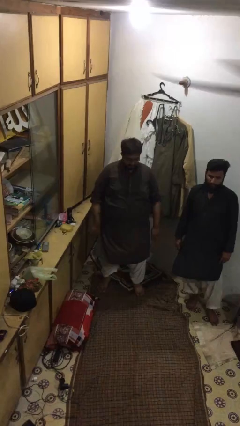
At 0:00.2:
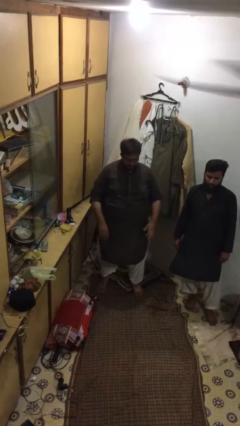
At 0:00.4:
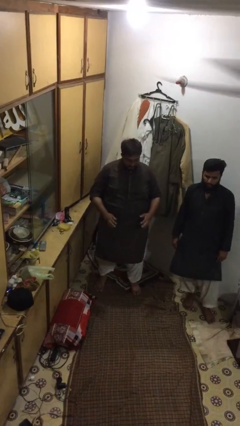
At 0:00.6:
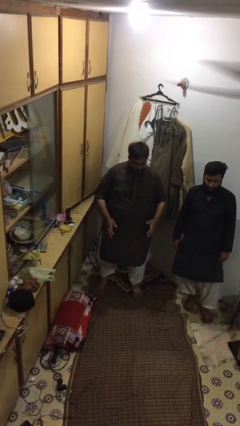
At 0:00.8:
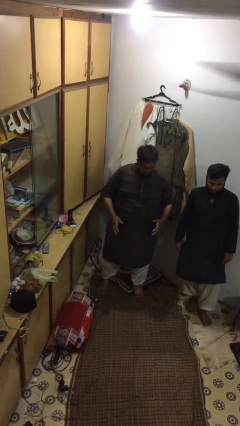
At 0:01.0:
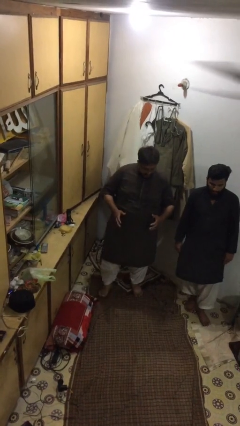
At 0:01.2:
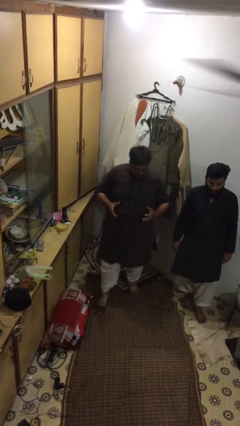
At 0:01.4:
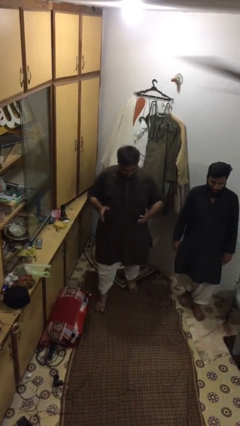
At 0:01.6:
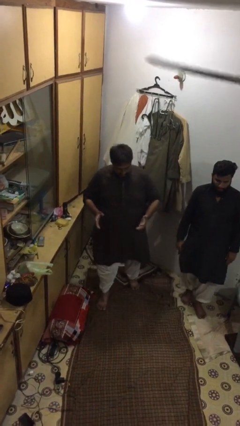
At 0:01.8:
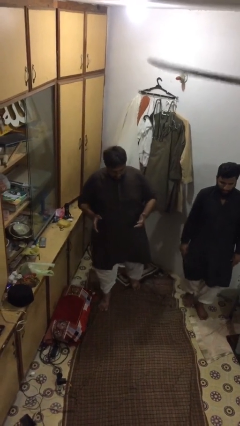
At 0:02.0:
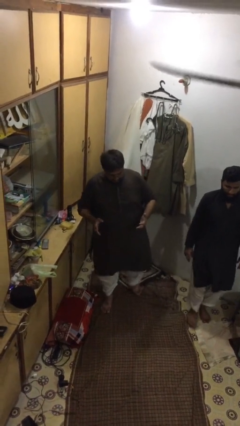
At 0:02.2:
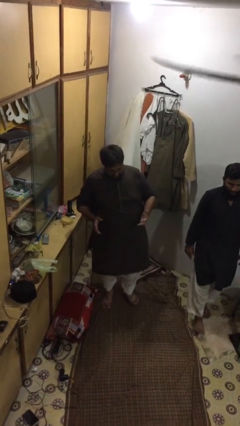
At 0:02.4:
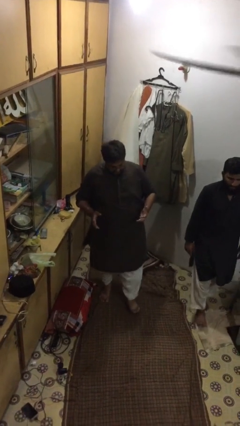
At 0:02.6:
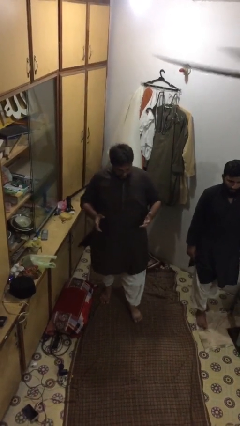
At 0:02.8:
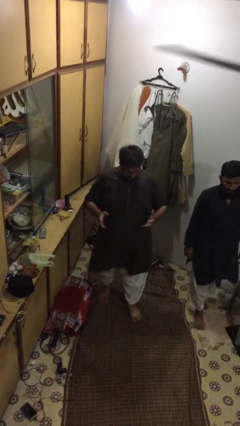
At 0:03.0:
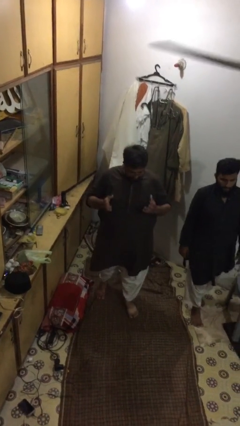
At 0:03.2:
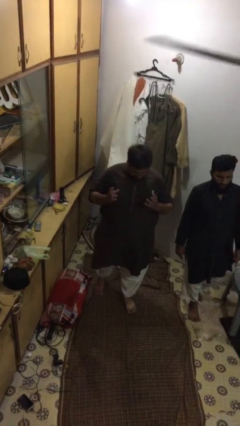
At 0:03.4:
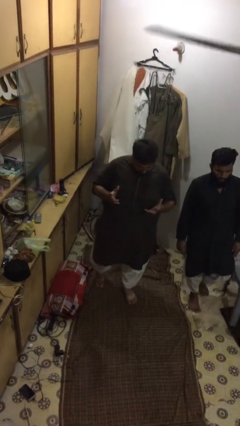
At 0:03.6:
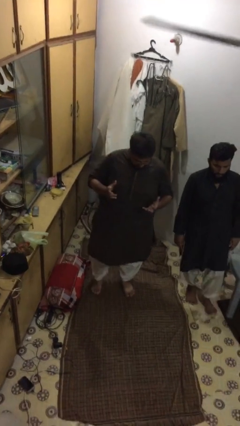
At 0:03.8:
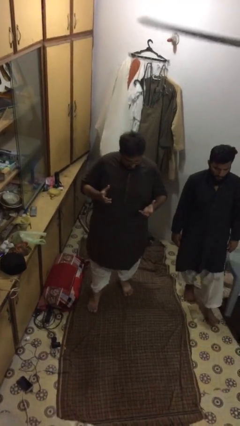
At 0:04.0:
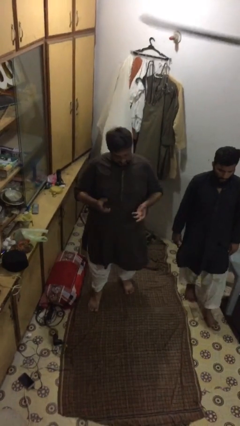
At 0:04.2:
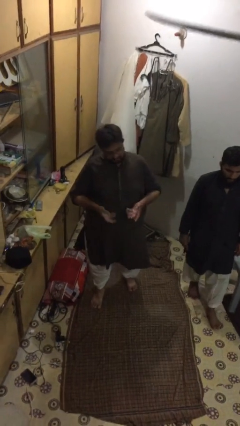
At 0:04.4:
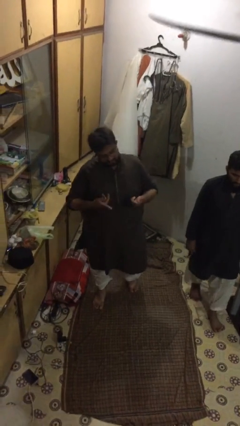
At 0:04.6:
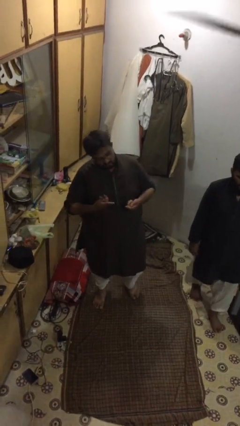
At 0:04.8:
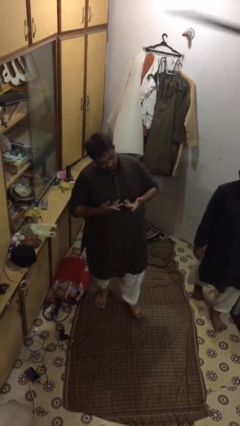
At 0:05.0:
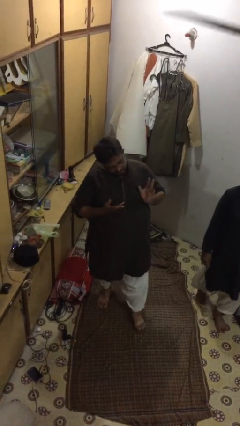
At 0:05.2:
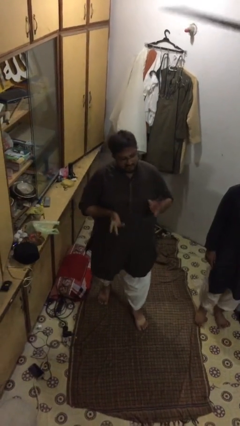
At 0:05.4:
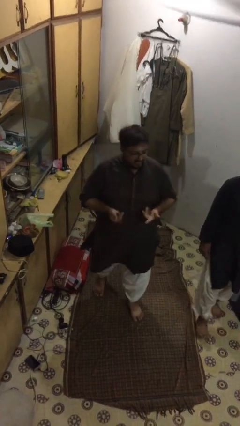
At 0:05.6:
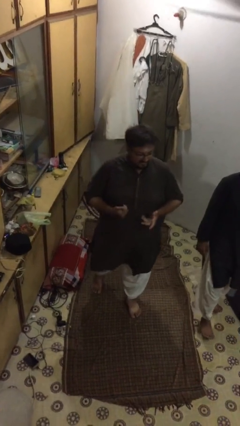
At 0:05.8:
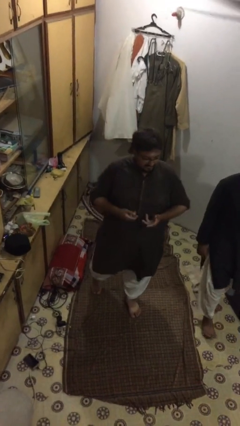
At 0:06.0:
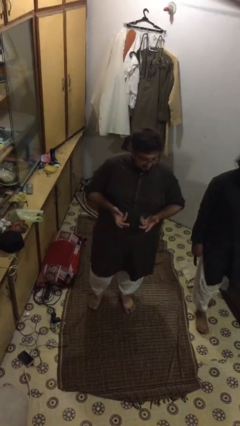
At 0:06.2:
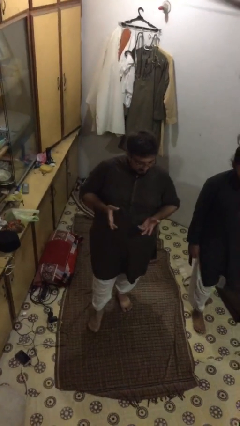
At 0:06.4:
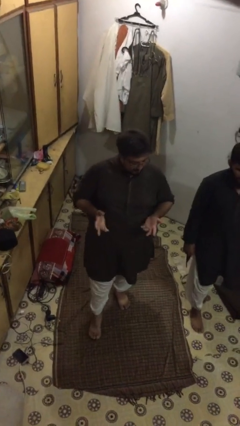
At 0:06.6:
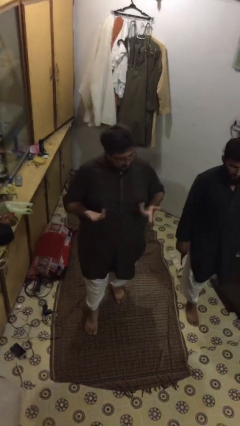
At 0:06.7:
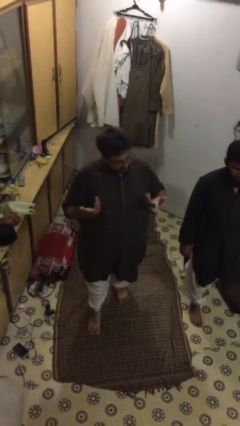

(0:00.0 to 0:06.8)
person talks to person

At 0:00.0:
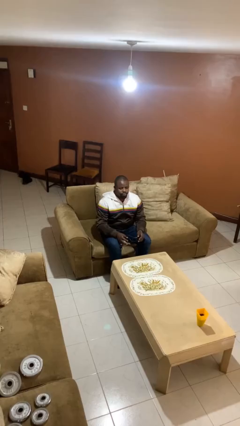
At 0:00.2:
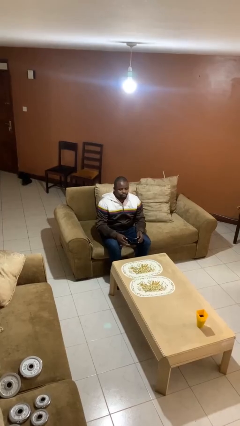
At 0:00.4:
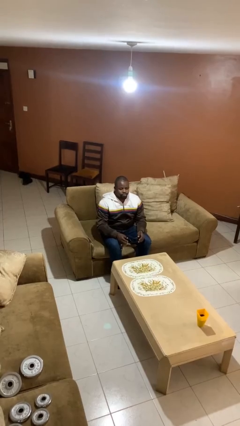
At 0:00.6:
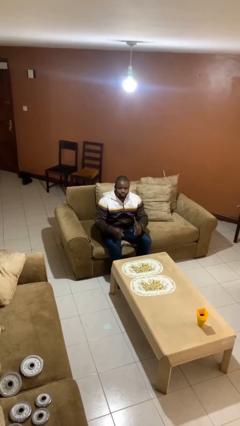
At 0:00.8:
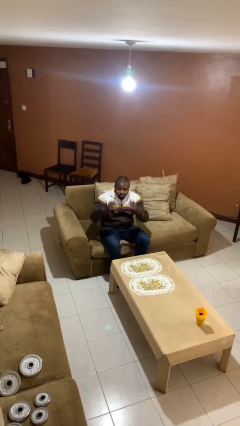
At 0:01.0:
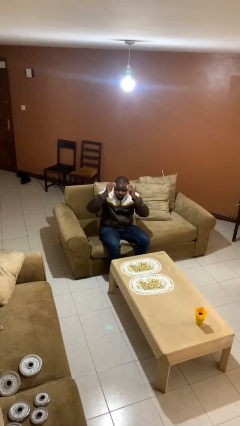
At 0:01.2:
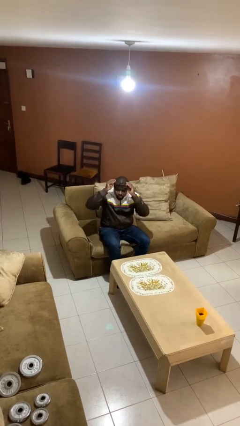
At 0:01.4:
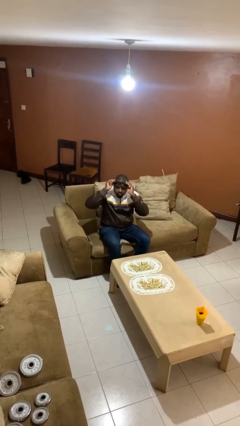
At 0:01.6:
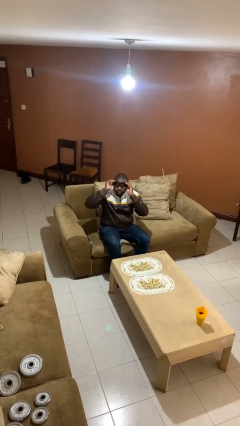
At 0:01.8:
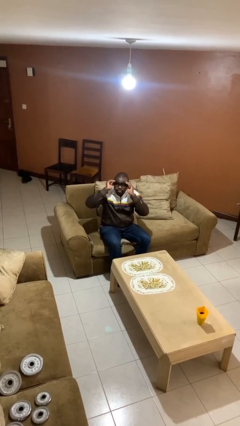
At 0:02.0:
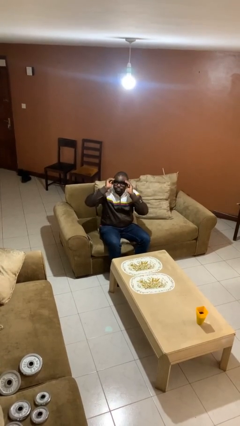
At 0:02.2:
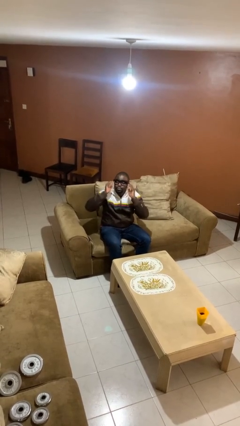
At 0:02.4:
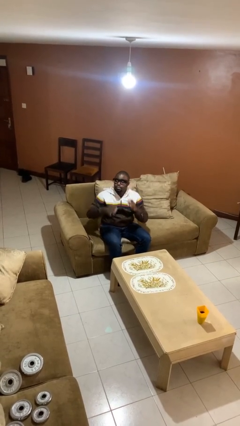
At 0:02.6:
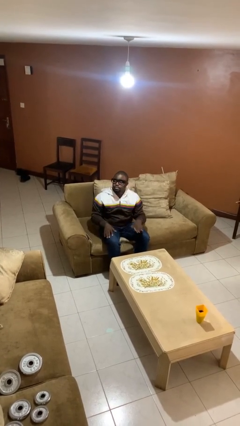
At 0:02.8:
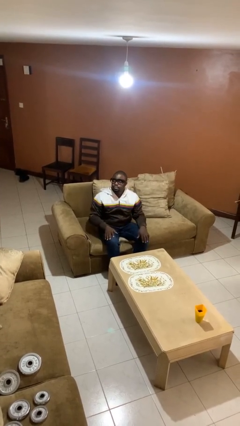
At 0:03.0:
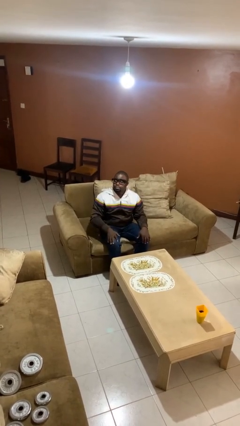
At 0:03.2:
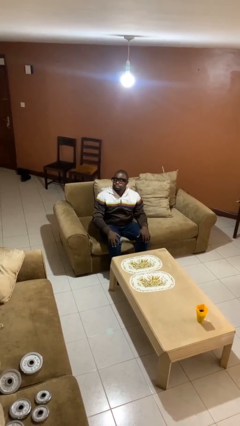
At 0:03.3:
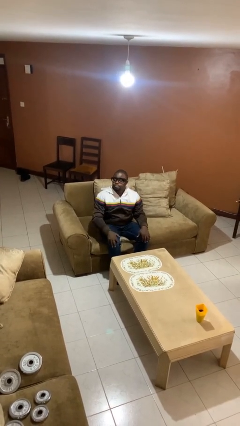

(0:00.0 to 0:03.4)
person puts on glasses

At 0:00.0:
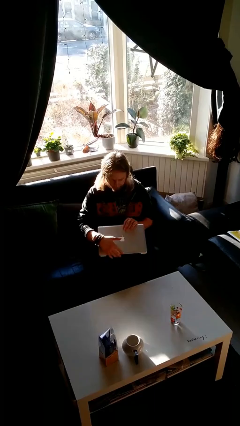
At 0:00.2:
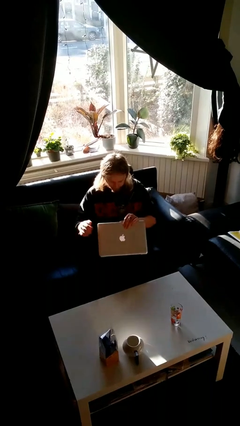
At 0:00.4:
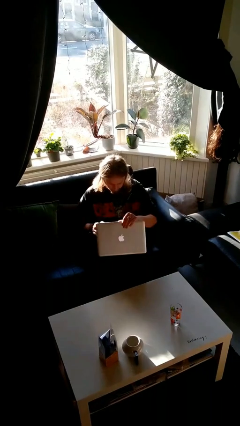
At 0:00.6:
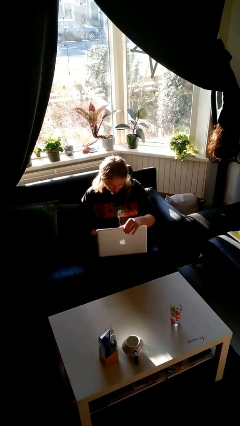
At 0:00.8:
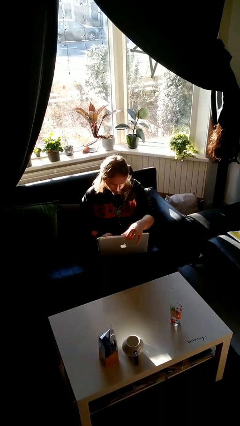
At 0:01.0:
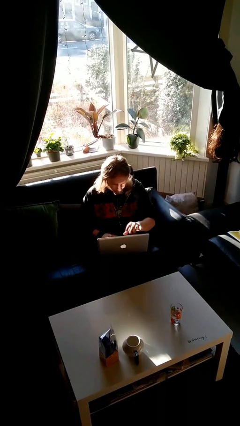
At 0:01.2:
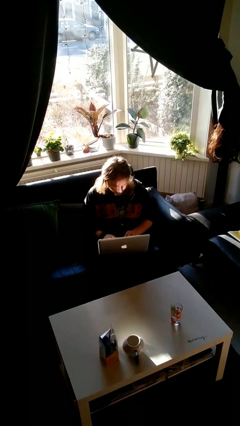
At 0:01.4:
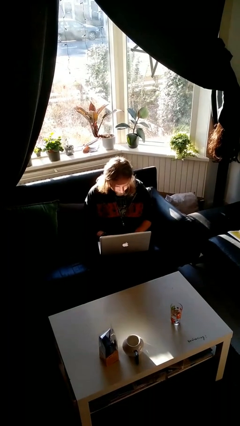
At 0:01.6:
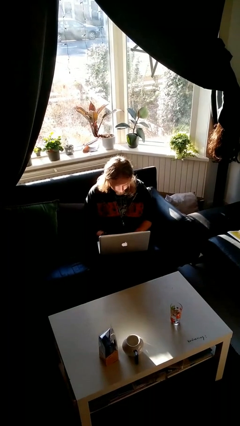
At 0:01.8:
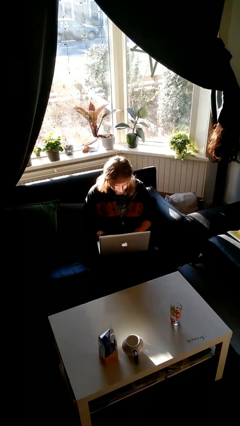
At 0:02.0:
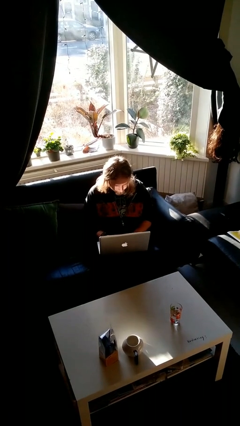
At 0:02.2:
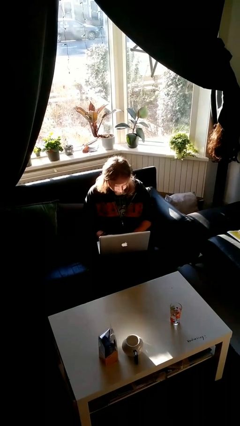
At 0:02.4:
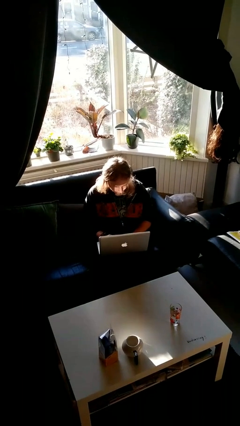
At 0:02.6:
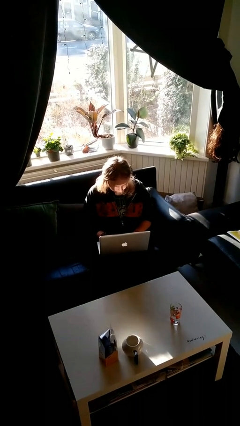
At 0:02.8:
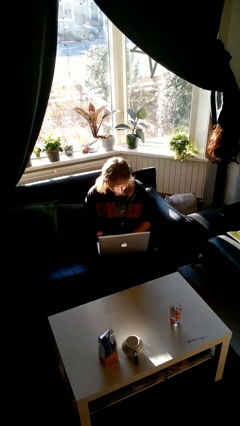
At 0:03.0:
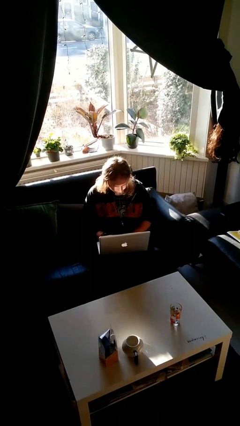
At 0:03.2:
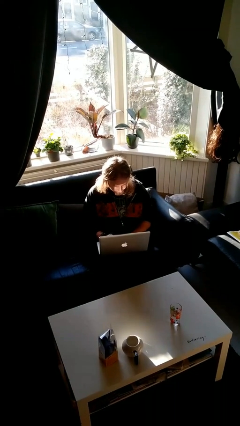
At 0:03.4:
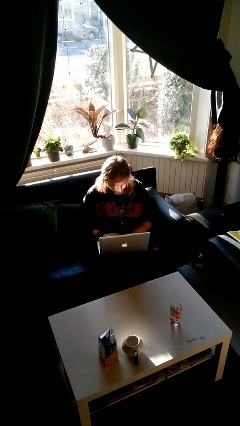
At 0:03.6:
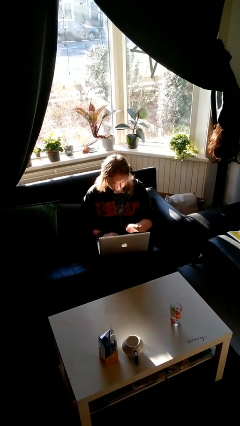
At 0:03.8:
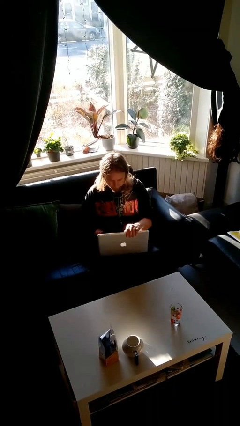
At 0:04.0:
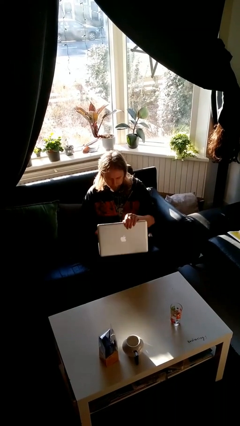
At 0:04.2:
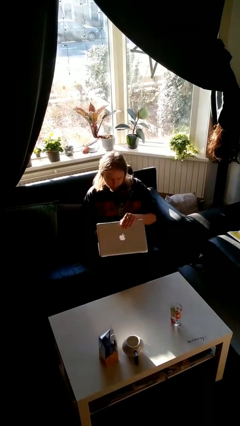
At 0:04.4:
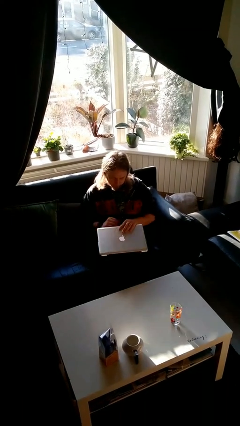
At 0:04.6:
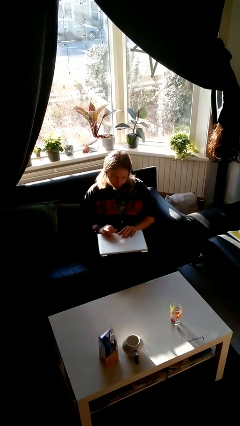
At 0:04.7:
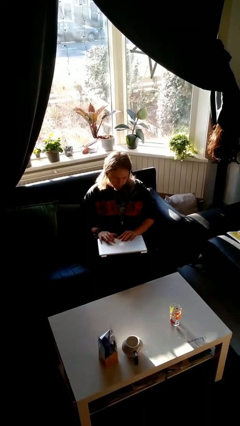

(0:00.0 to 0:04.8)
person interacts with laptop

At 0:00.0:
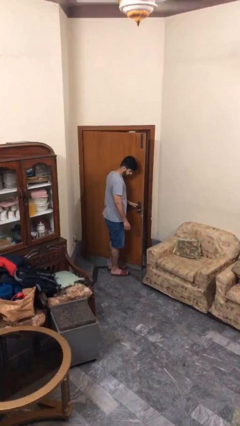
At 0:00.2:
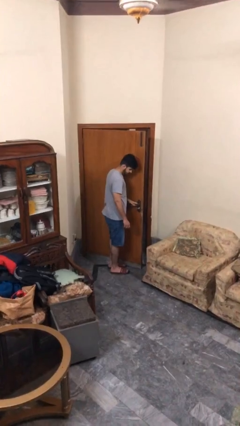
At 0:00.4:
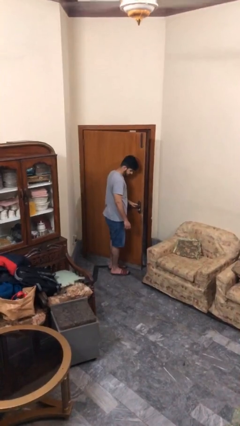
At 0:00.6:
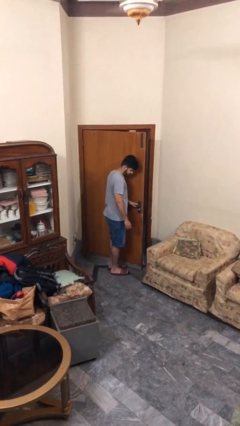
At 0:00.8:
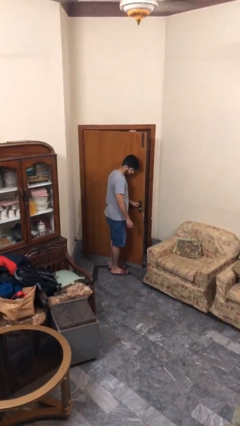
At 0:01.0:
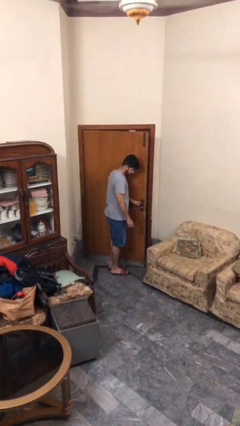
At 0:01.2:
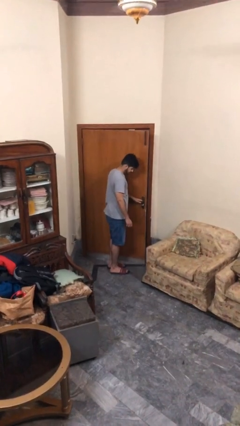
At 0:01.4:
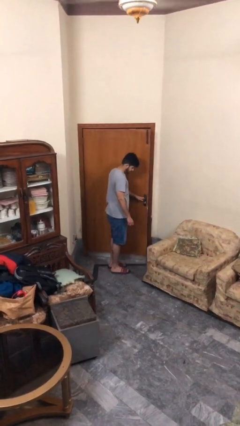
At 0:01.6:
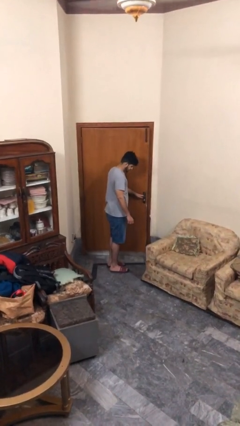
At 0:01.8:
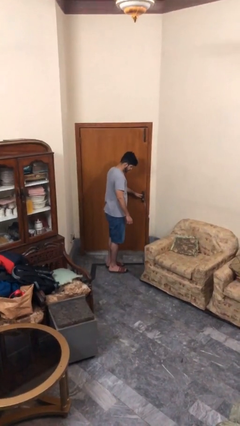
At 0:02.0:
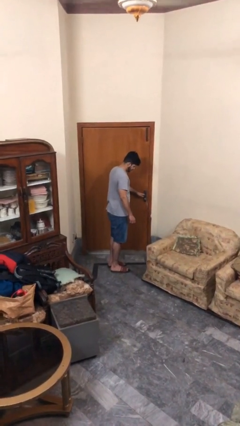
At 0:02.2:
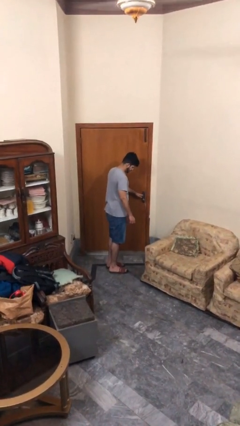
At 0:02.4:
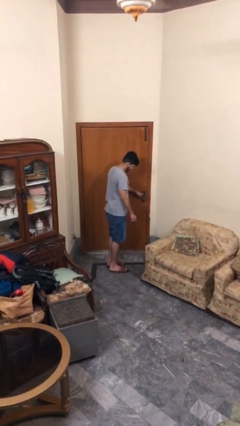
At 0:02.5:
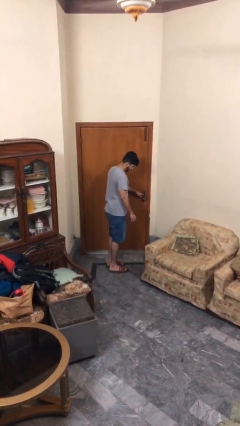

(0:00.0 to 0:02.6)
person closes facility door
